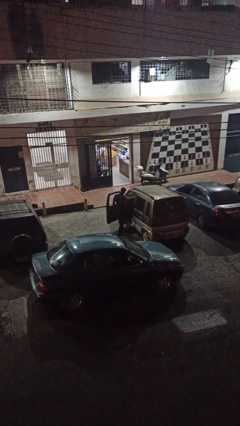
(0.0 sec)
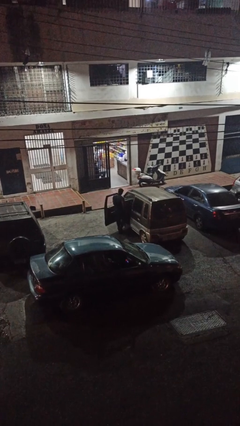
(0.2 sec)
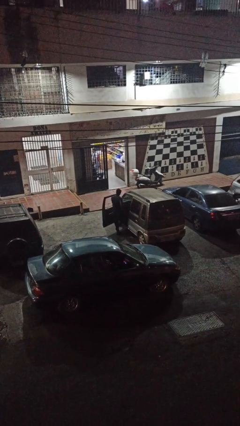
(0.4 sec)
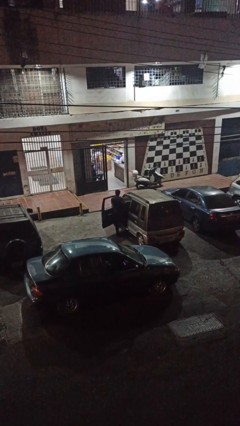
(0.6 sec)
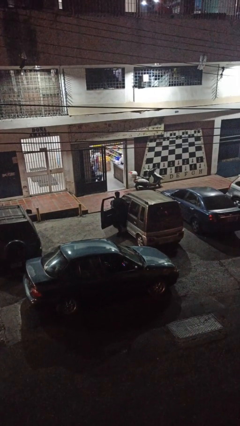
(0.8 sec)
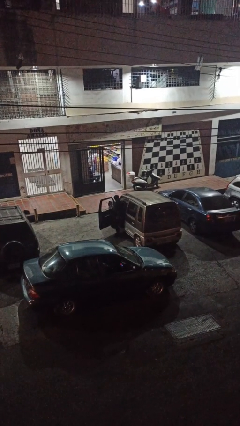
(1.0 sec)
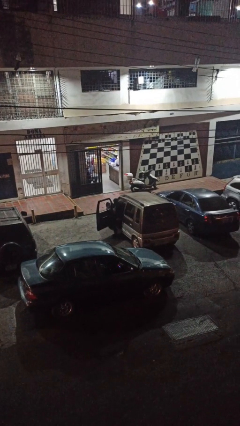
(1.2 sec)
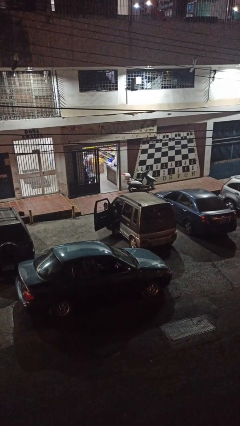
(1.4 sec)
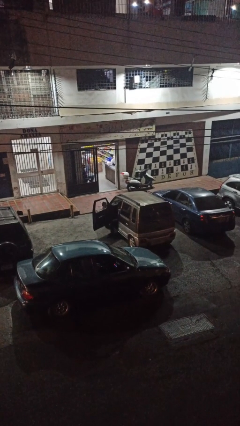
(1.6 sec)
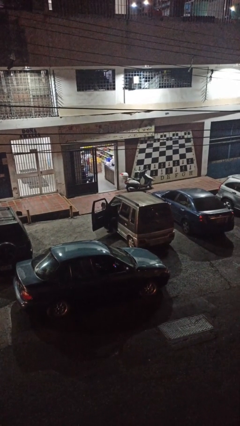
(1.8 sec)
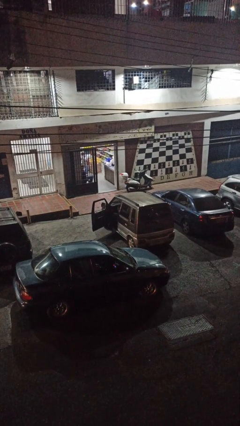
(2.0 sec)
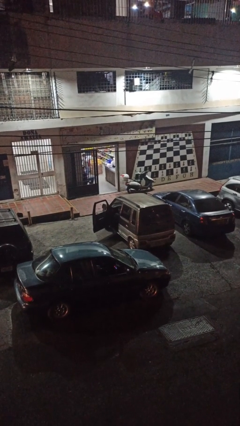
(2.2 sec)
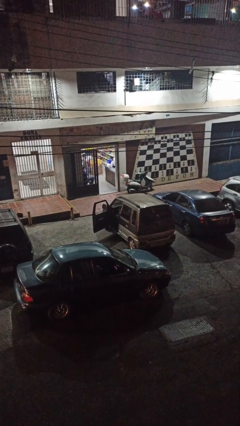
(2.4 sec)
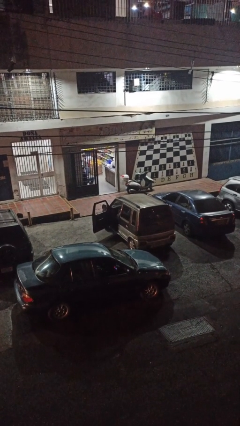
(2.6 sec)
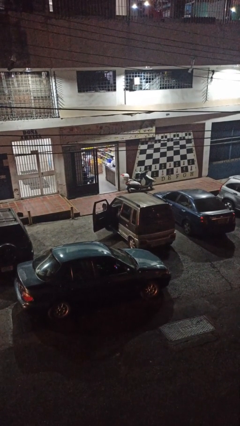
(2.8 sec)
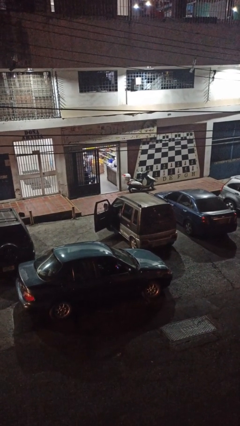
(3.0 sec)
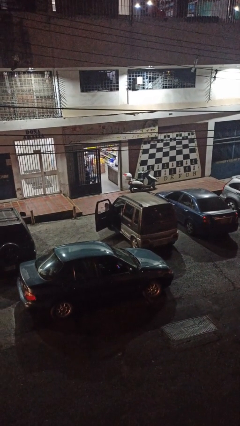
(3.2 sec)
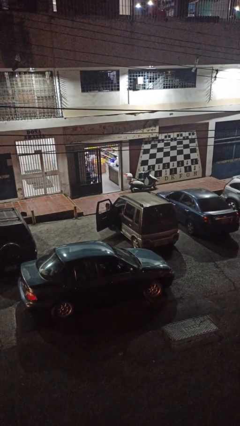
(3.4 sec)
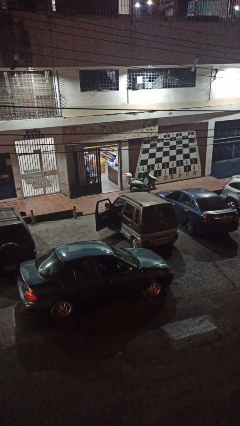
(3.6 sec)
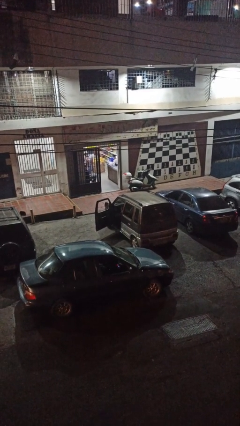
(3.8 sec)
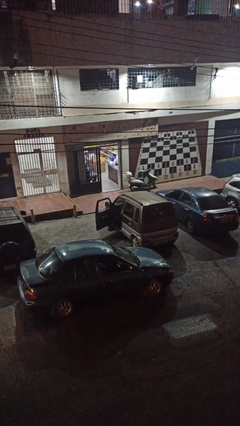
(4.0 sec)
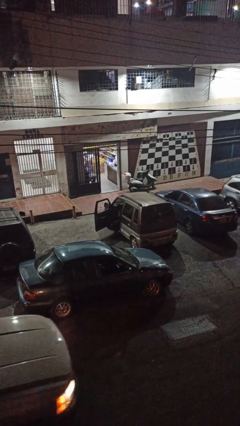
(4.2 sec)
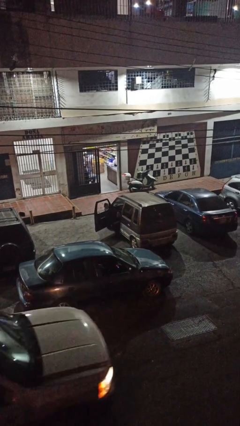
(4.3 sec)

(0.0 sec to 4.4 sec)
person enters car

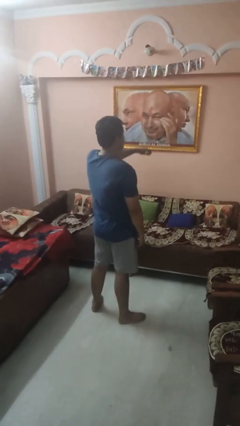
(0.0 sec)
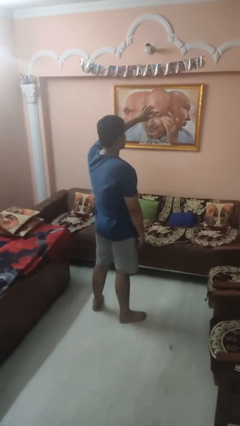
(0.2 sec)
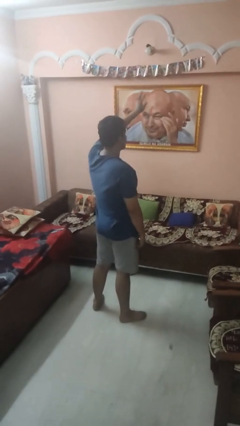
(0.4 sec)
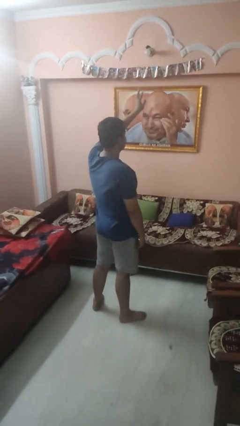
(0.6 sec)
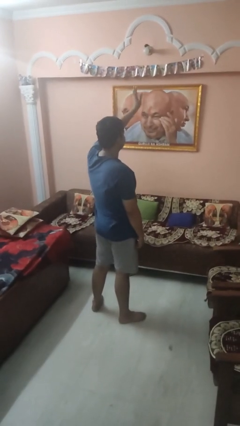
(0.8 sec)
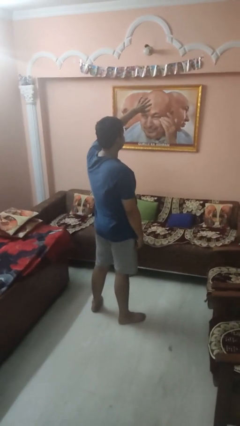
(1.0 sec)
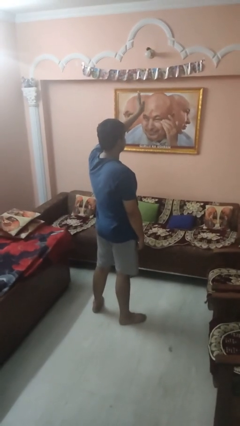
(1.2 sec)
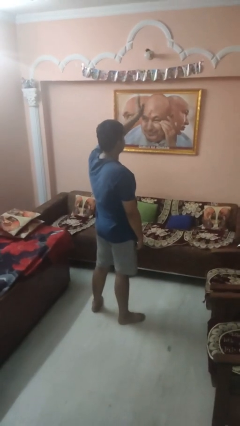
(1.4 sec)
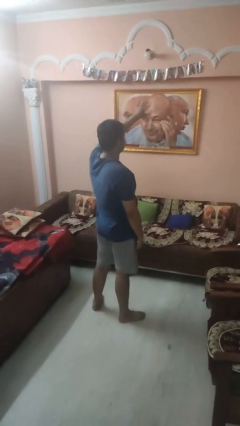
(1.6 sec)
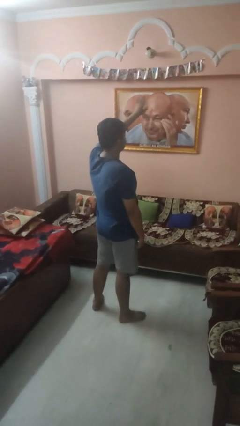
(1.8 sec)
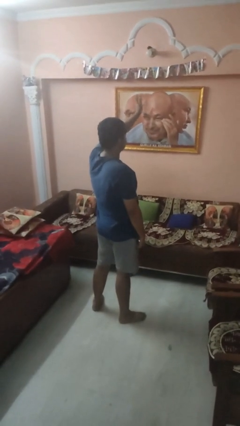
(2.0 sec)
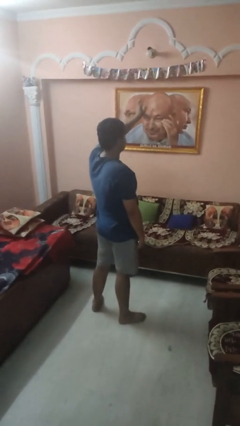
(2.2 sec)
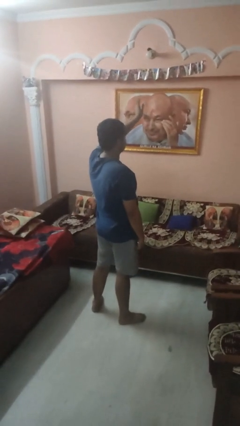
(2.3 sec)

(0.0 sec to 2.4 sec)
person waves at person

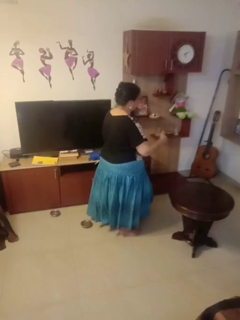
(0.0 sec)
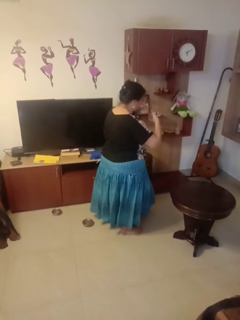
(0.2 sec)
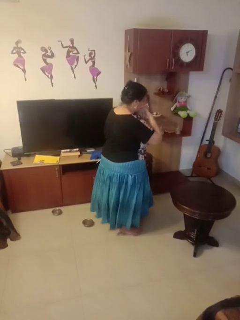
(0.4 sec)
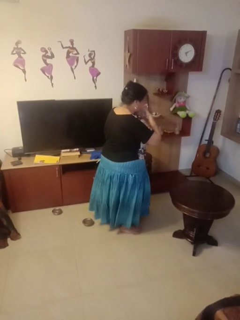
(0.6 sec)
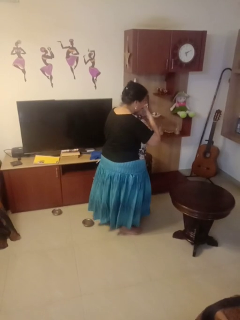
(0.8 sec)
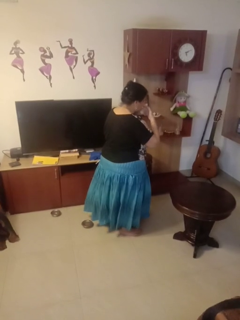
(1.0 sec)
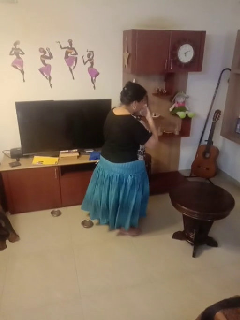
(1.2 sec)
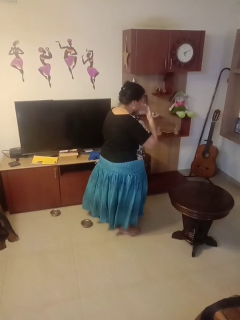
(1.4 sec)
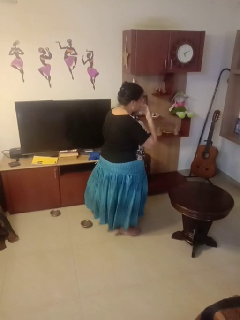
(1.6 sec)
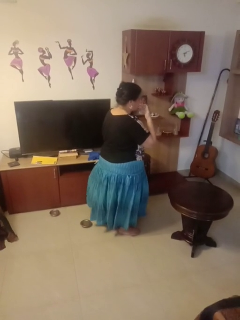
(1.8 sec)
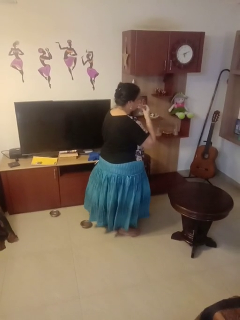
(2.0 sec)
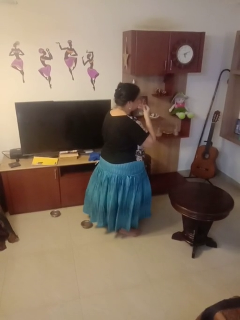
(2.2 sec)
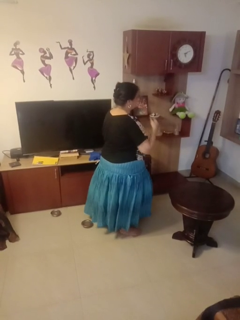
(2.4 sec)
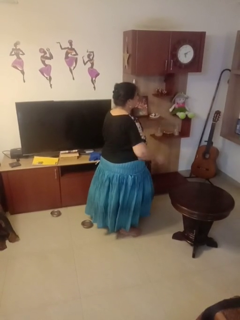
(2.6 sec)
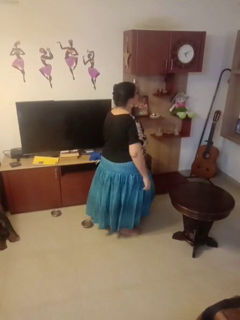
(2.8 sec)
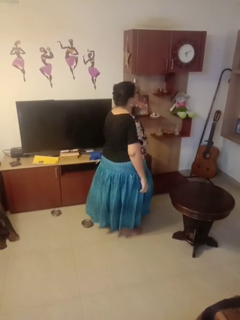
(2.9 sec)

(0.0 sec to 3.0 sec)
person licks fingers

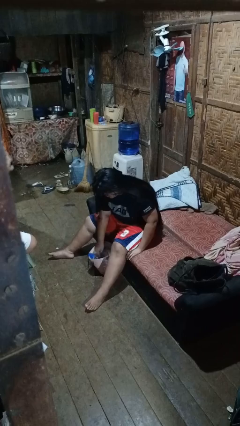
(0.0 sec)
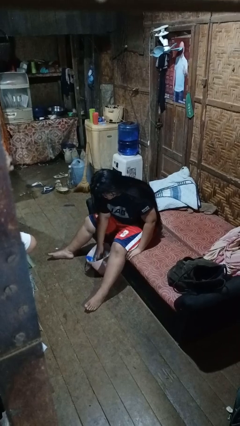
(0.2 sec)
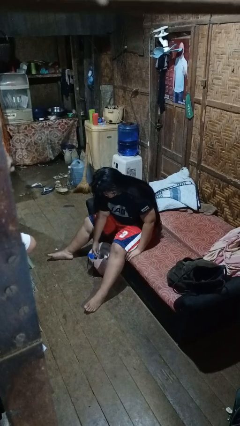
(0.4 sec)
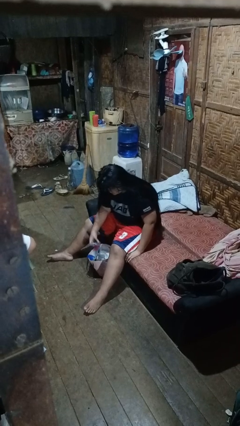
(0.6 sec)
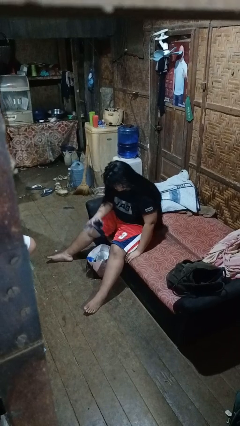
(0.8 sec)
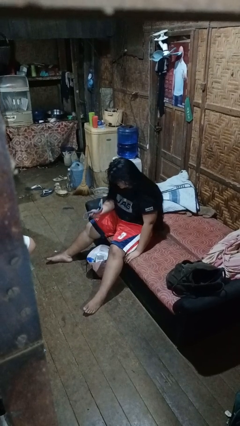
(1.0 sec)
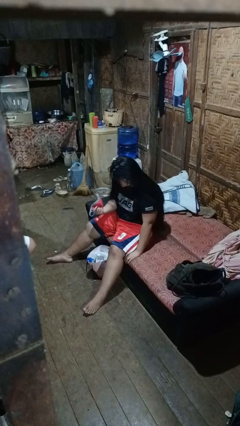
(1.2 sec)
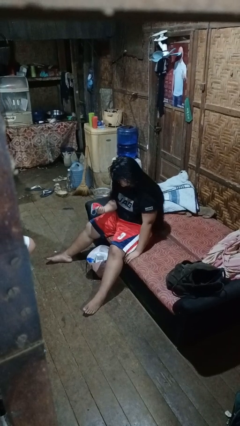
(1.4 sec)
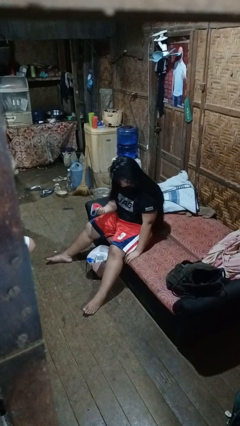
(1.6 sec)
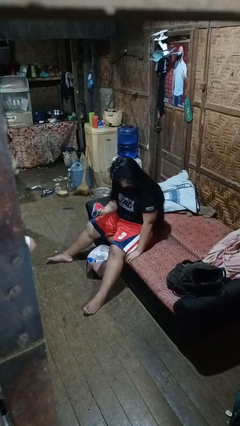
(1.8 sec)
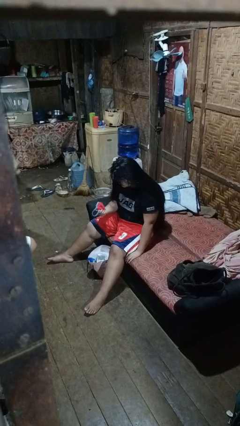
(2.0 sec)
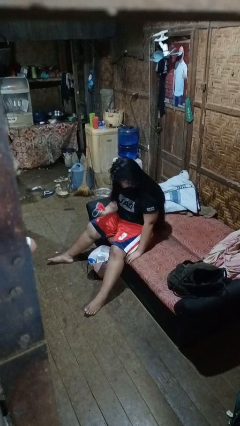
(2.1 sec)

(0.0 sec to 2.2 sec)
person takes object from bag

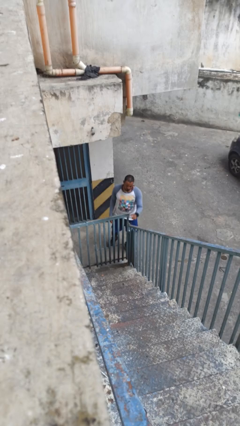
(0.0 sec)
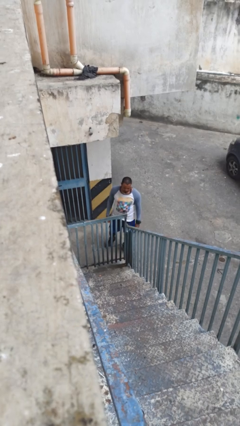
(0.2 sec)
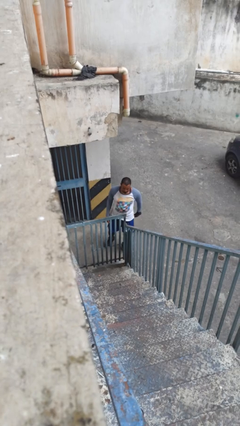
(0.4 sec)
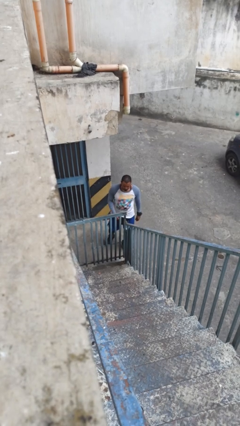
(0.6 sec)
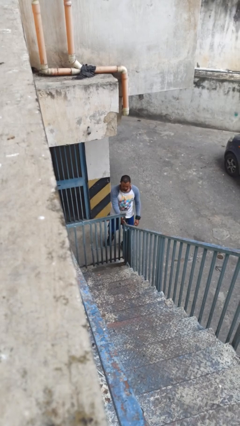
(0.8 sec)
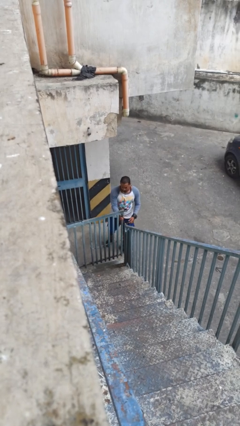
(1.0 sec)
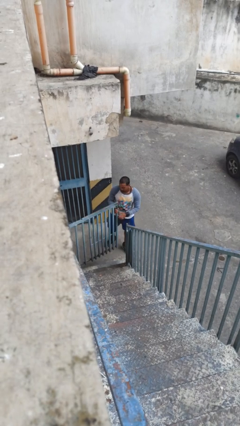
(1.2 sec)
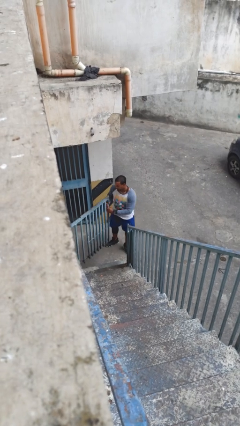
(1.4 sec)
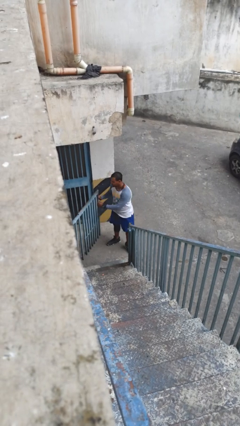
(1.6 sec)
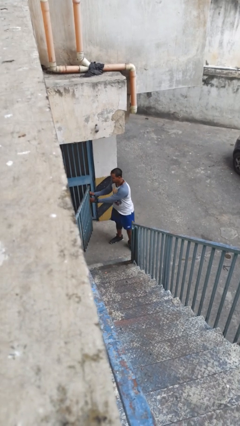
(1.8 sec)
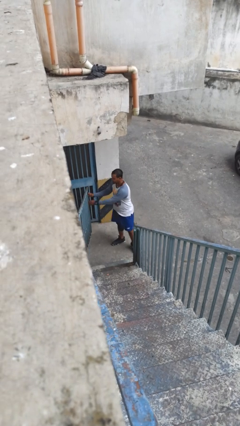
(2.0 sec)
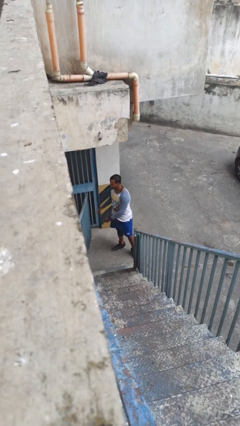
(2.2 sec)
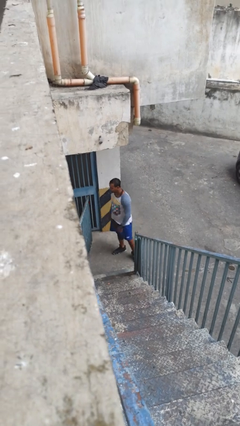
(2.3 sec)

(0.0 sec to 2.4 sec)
person opens facility door

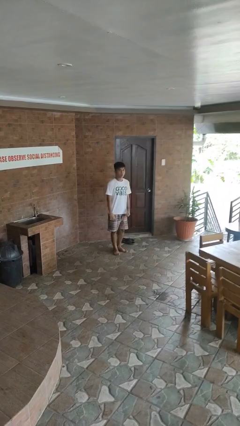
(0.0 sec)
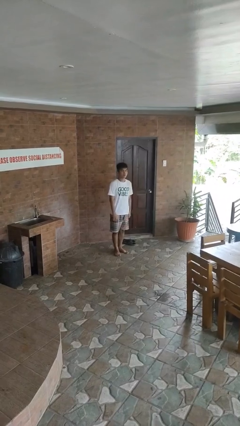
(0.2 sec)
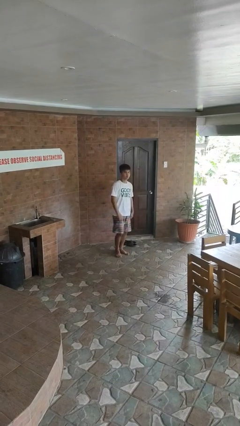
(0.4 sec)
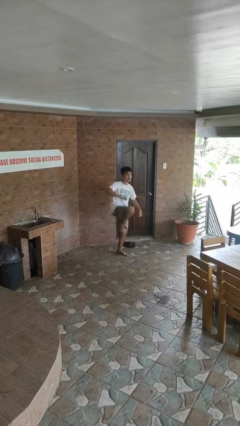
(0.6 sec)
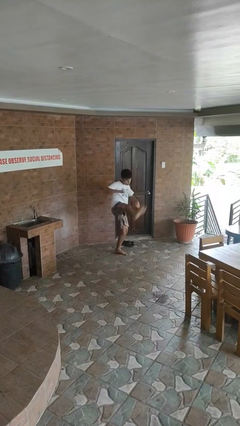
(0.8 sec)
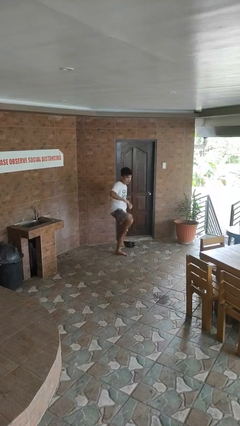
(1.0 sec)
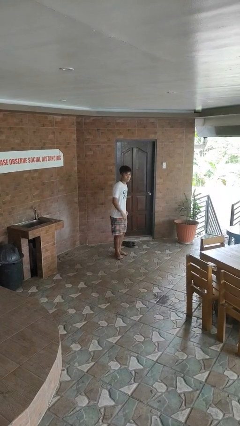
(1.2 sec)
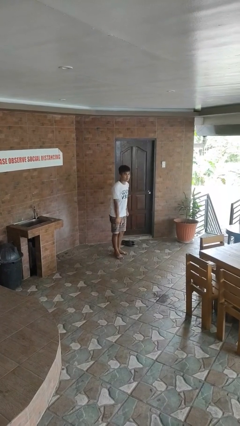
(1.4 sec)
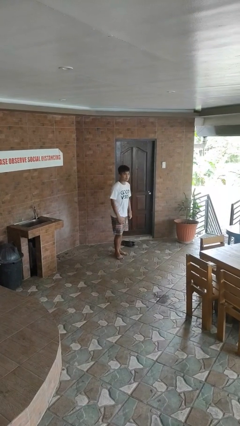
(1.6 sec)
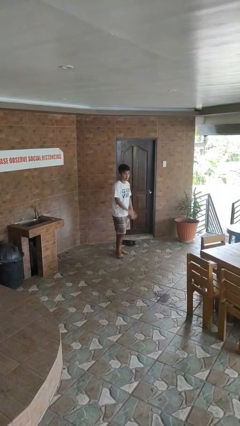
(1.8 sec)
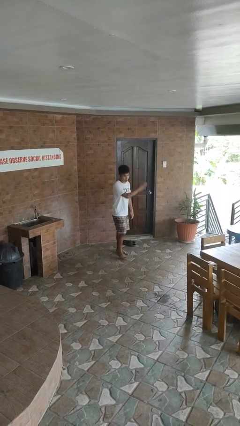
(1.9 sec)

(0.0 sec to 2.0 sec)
person karate kicks

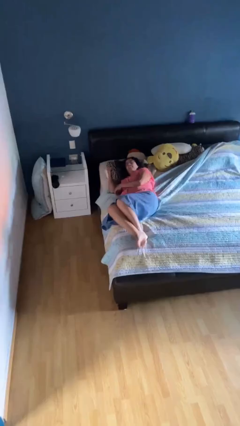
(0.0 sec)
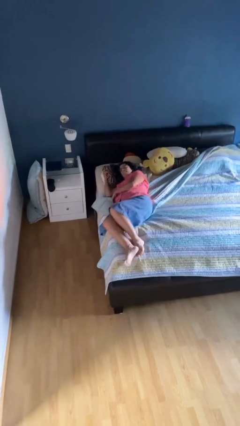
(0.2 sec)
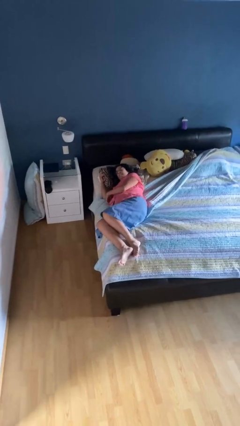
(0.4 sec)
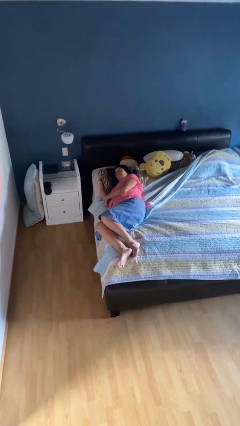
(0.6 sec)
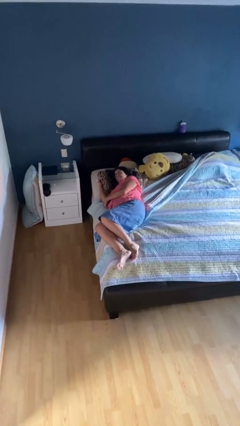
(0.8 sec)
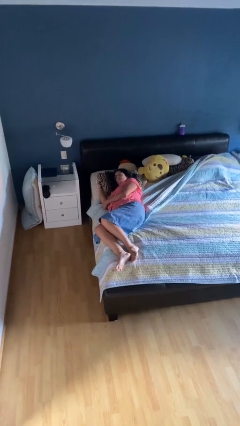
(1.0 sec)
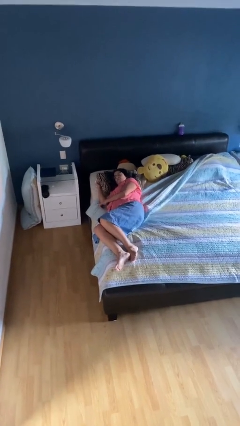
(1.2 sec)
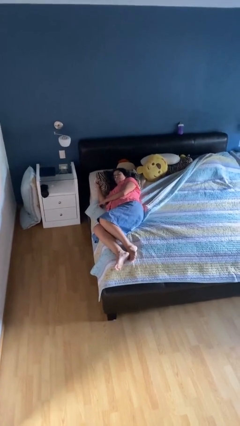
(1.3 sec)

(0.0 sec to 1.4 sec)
person lies down on bed
